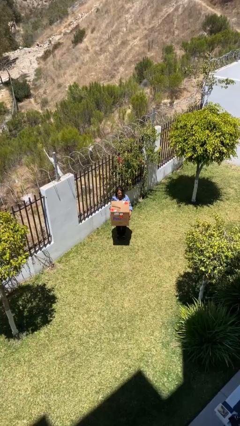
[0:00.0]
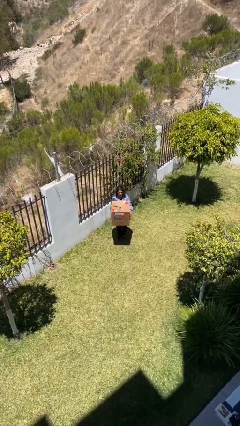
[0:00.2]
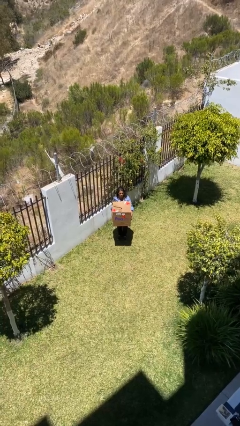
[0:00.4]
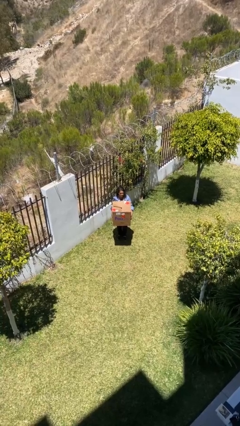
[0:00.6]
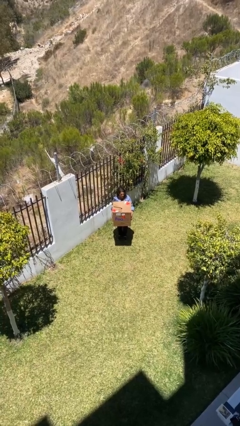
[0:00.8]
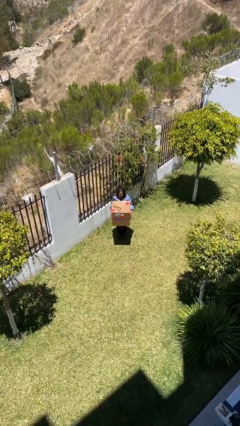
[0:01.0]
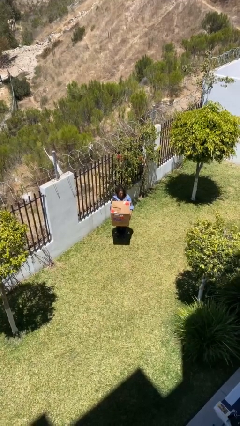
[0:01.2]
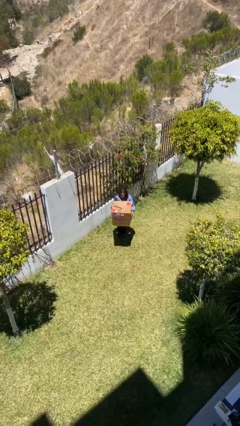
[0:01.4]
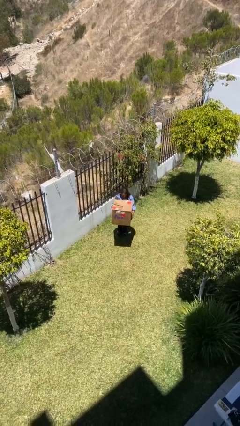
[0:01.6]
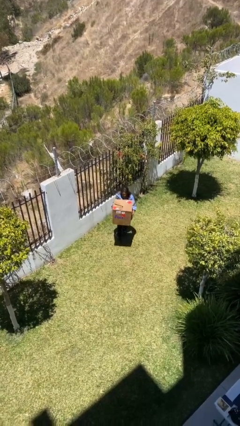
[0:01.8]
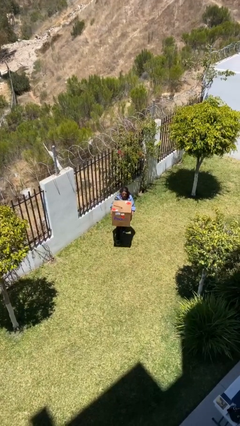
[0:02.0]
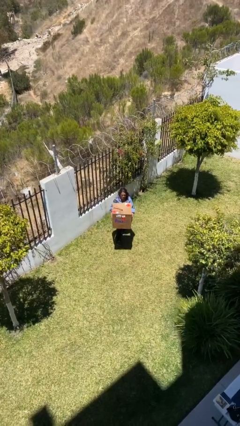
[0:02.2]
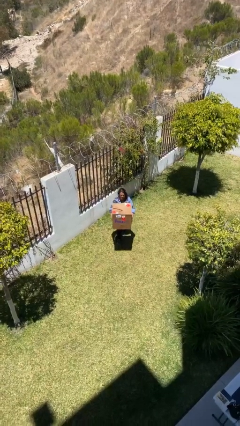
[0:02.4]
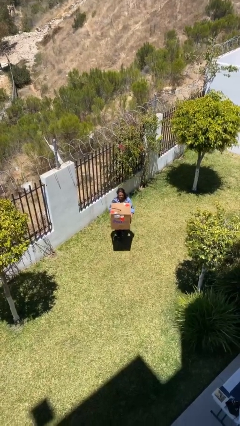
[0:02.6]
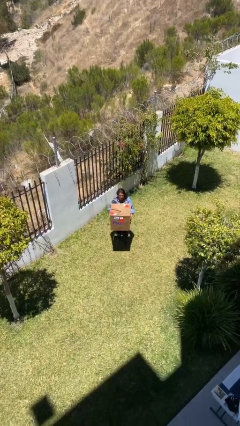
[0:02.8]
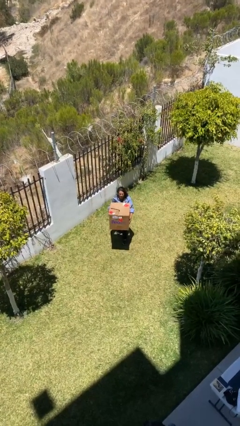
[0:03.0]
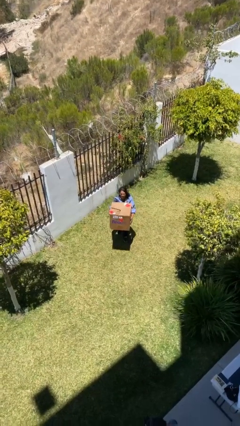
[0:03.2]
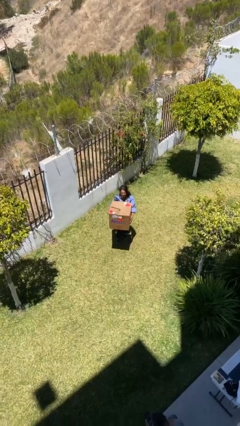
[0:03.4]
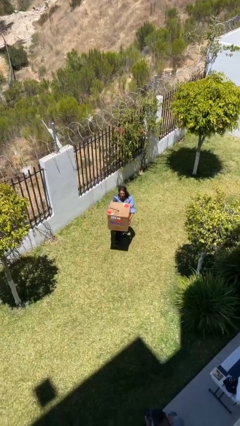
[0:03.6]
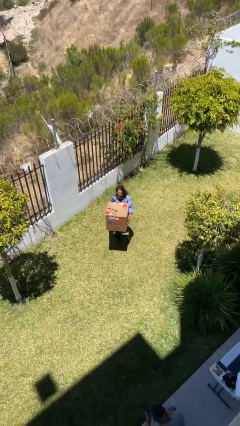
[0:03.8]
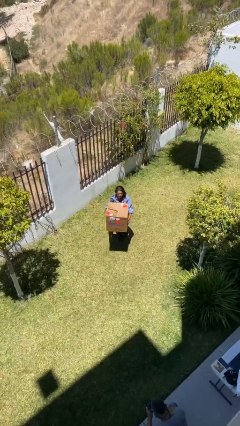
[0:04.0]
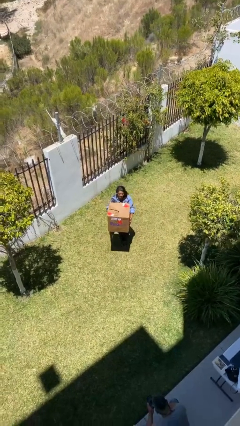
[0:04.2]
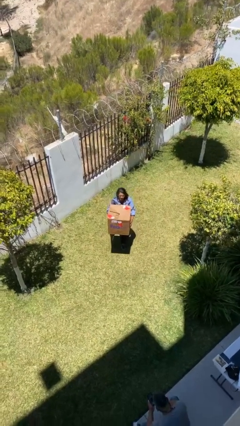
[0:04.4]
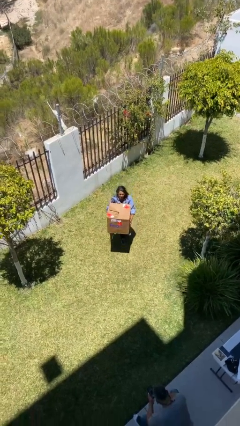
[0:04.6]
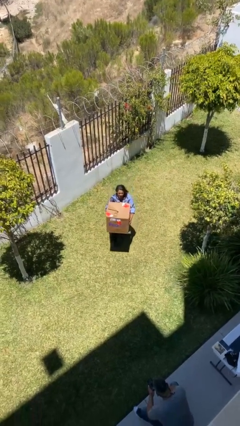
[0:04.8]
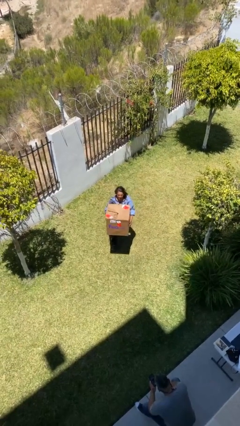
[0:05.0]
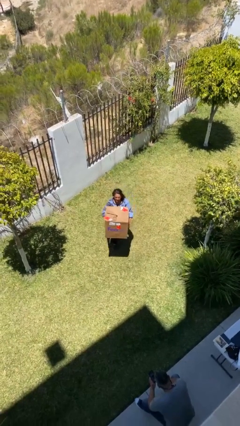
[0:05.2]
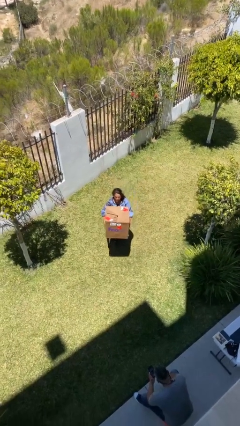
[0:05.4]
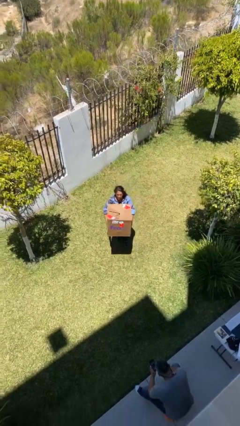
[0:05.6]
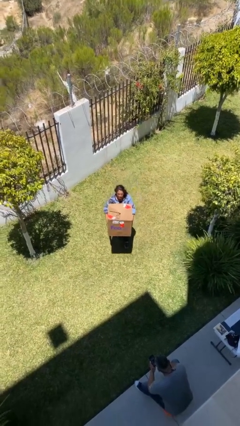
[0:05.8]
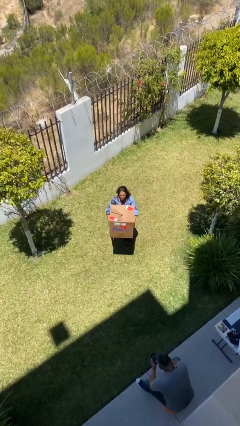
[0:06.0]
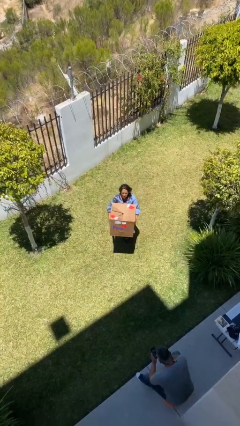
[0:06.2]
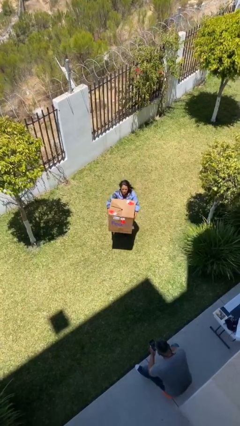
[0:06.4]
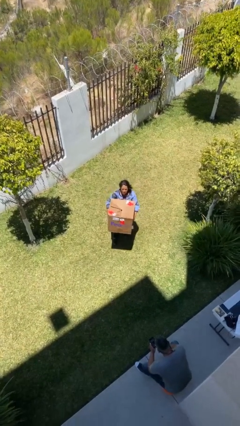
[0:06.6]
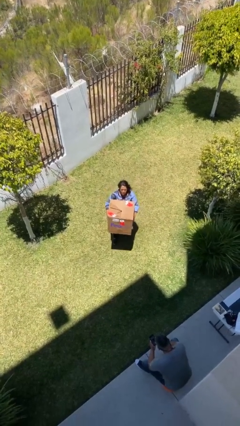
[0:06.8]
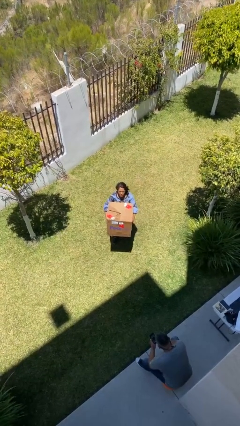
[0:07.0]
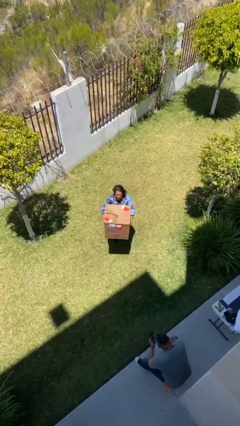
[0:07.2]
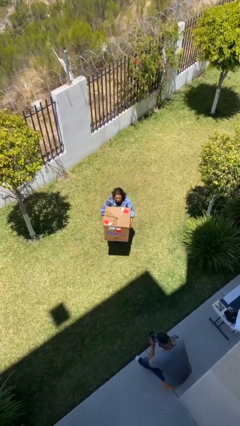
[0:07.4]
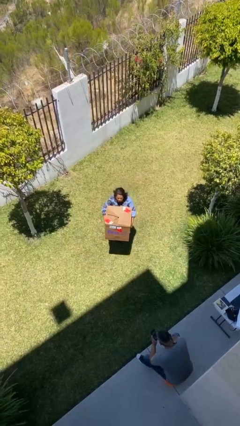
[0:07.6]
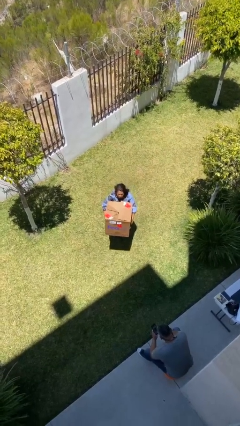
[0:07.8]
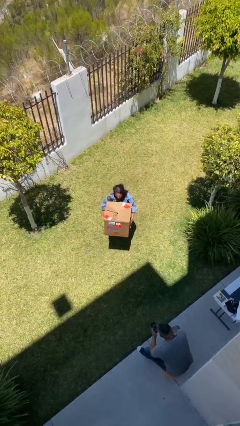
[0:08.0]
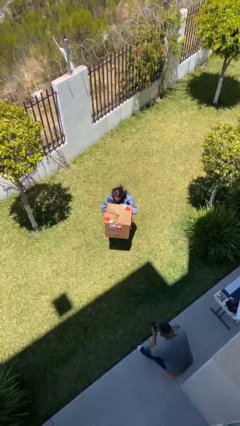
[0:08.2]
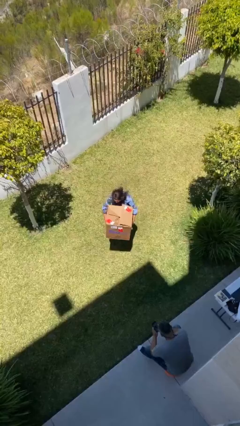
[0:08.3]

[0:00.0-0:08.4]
person carries heavy object

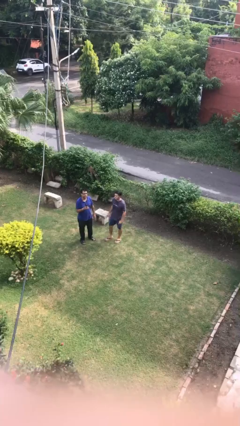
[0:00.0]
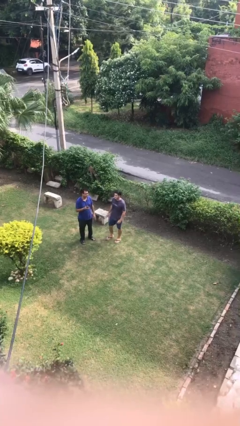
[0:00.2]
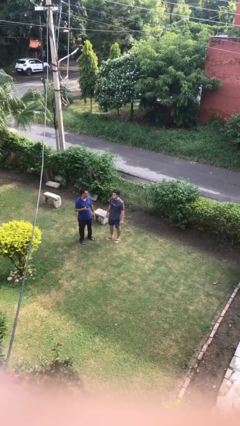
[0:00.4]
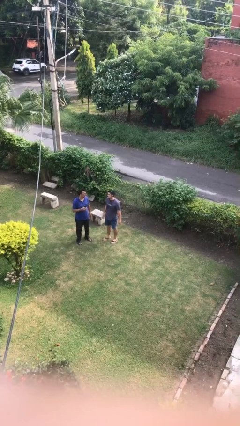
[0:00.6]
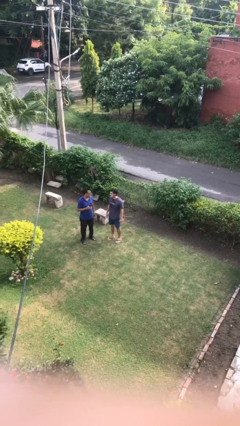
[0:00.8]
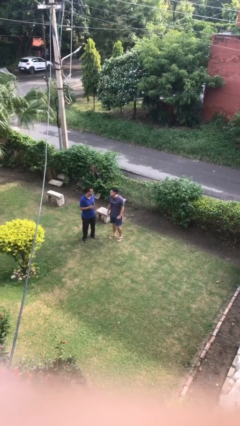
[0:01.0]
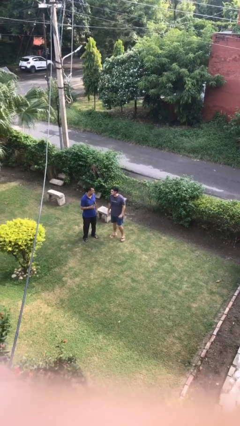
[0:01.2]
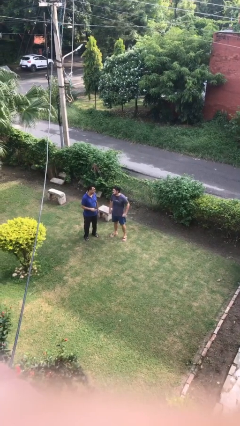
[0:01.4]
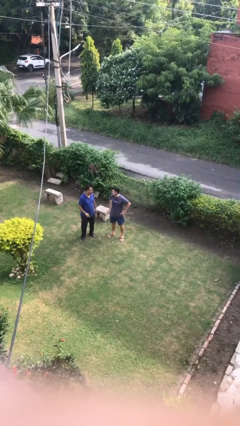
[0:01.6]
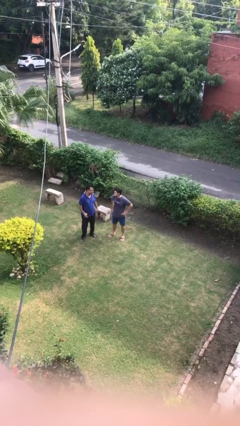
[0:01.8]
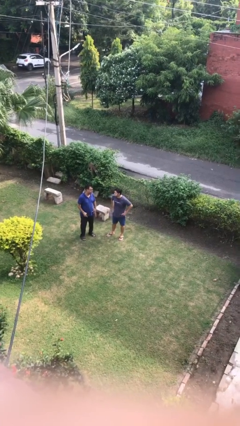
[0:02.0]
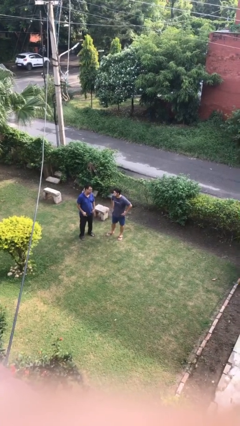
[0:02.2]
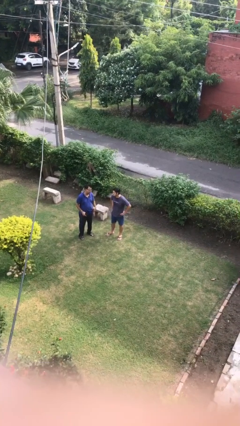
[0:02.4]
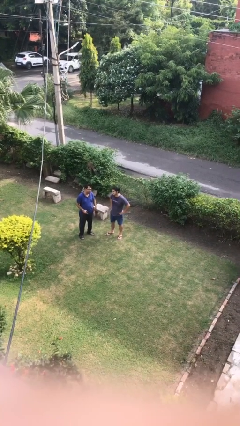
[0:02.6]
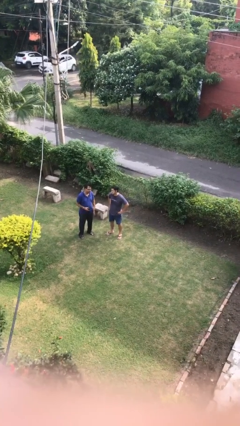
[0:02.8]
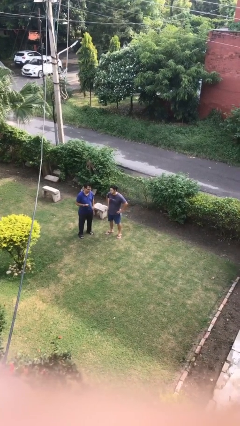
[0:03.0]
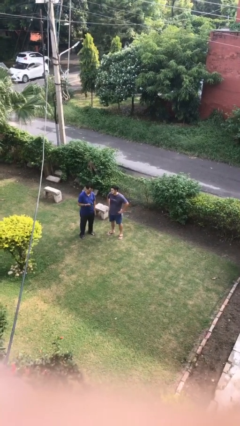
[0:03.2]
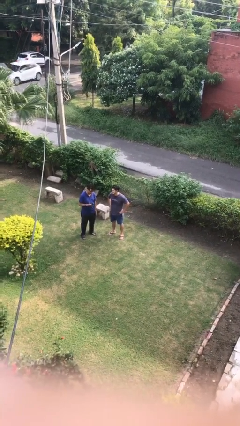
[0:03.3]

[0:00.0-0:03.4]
person talks to person

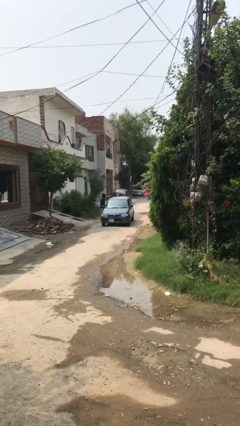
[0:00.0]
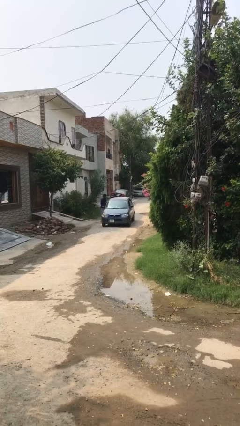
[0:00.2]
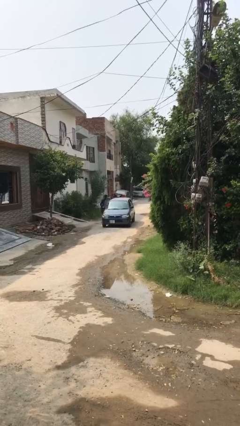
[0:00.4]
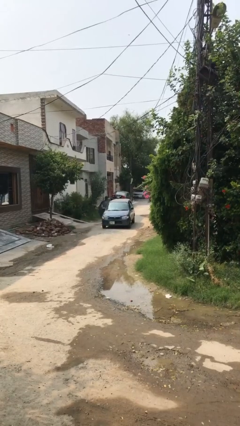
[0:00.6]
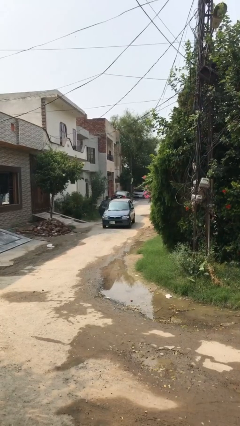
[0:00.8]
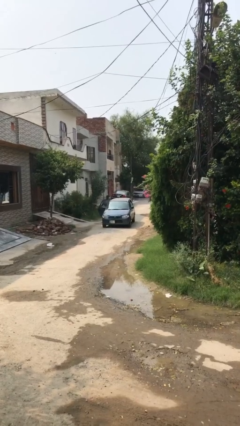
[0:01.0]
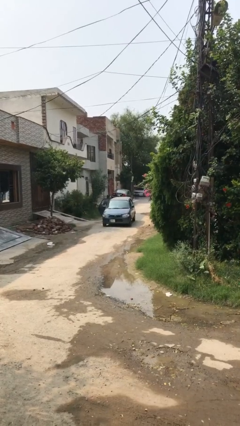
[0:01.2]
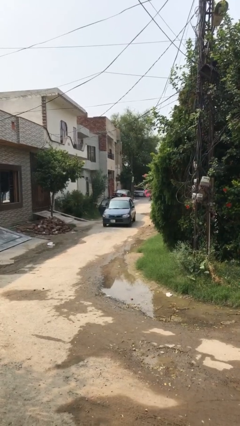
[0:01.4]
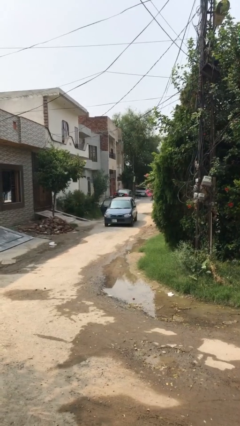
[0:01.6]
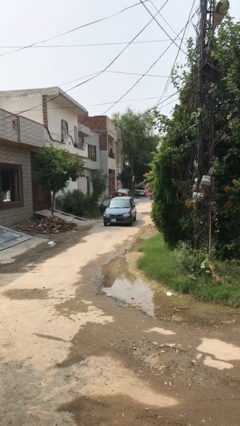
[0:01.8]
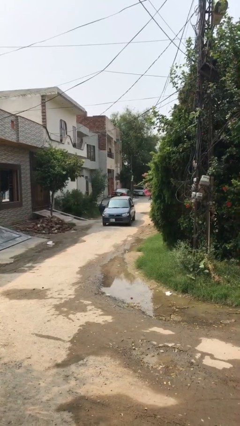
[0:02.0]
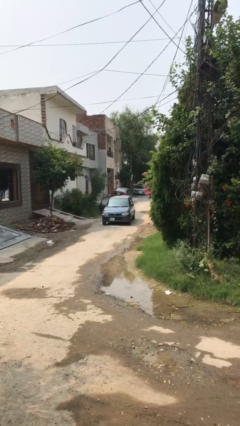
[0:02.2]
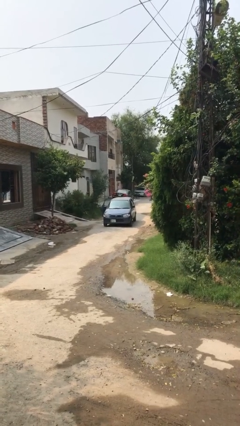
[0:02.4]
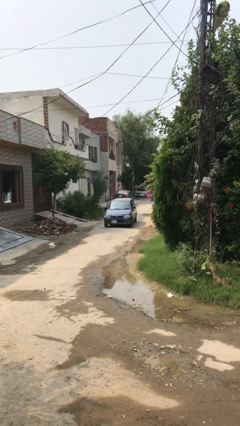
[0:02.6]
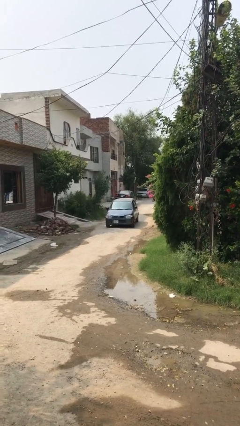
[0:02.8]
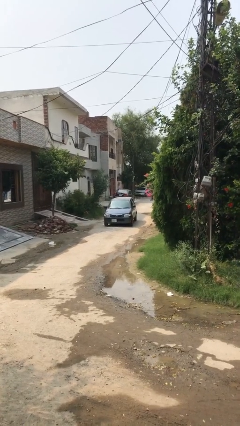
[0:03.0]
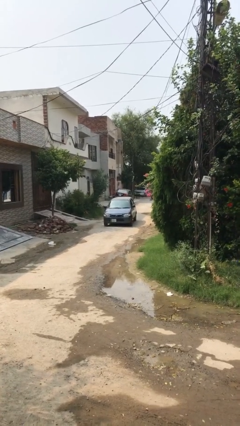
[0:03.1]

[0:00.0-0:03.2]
car picks up person

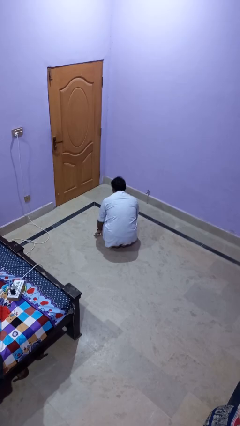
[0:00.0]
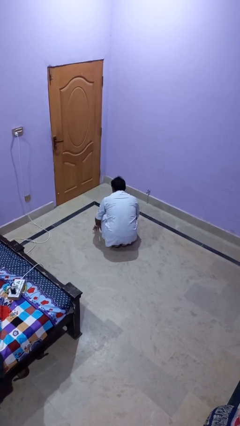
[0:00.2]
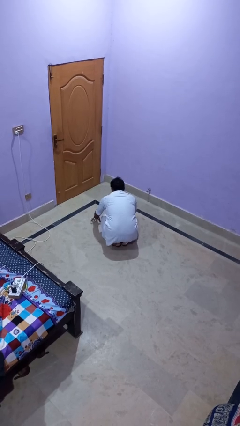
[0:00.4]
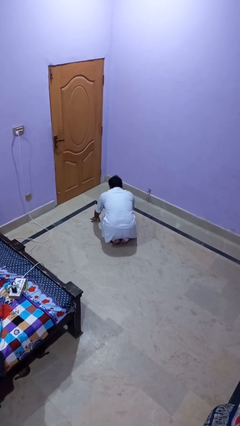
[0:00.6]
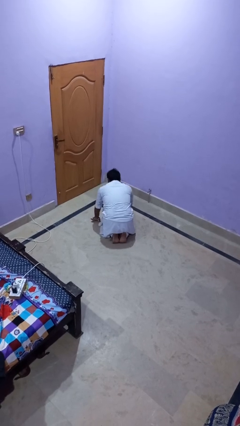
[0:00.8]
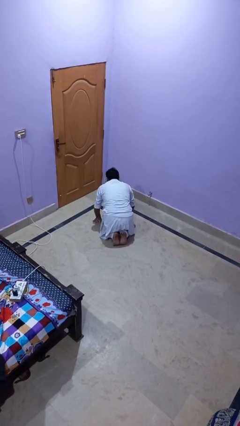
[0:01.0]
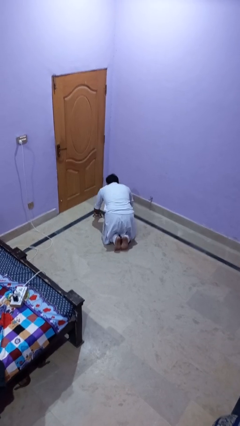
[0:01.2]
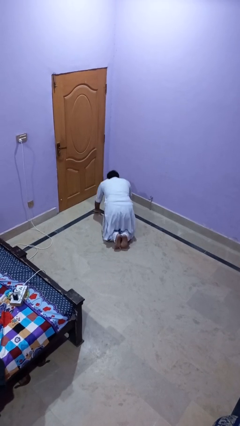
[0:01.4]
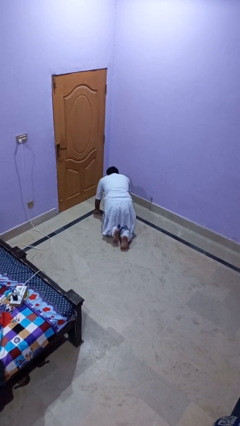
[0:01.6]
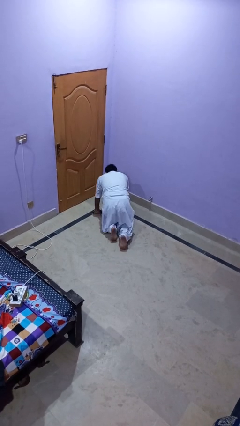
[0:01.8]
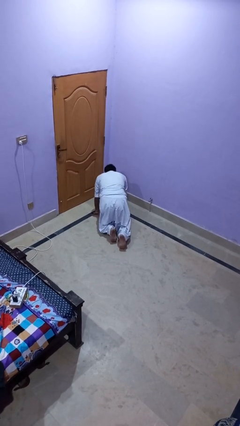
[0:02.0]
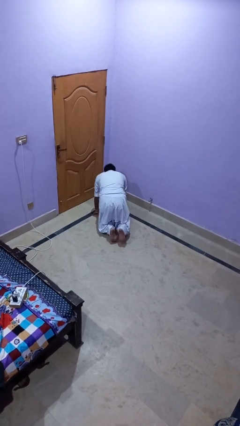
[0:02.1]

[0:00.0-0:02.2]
person crawls

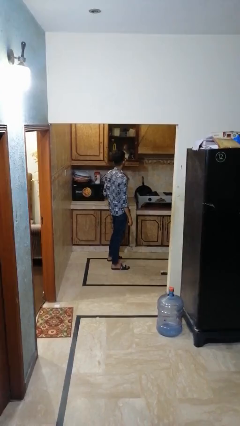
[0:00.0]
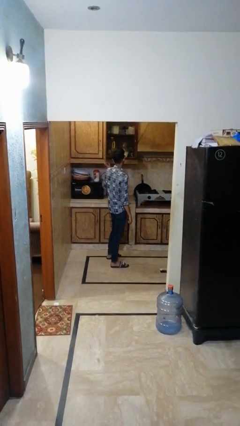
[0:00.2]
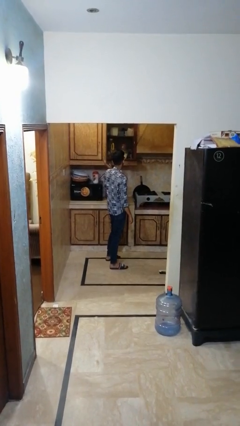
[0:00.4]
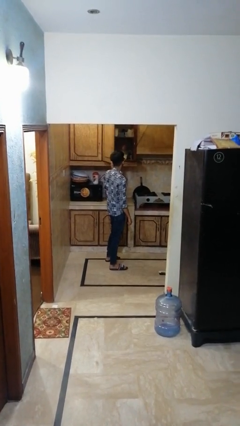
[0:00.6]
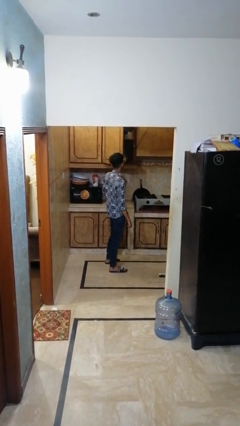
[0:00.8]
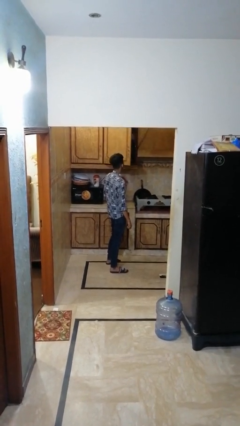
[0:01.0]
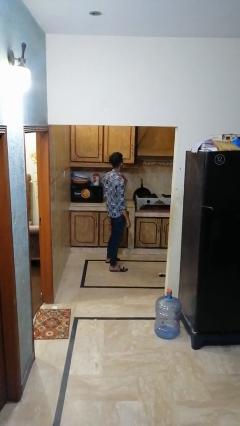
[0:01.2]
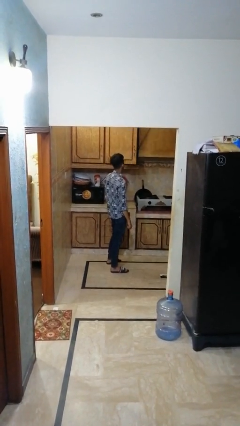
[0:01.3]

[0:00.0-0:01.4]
person closes cabinet
